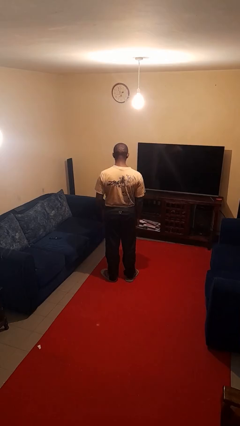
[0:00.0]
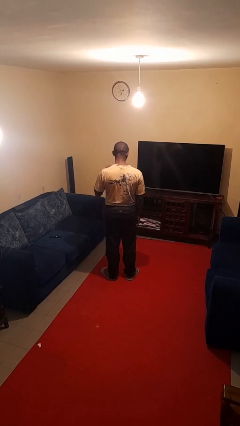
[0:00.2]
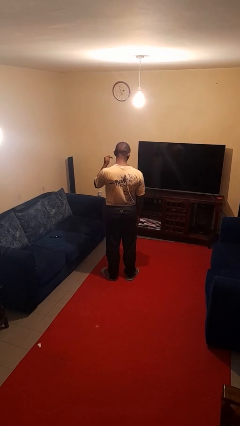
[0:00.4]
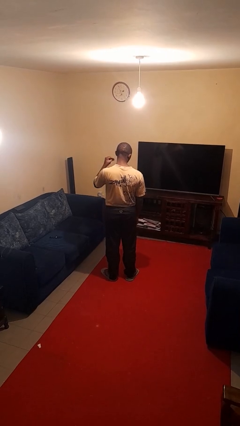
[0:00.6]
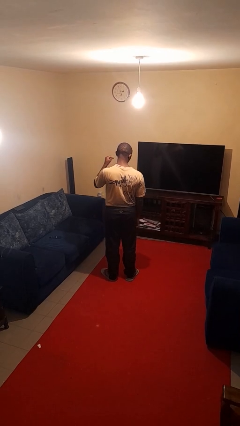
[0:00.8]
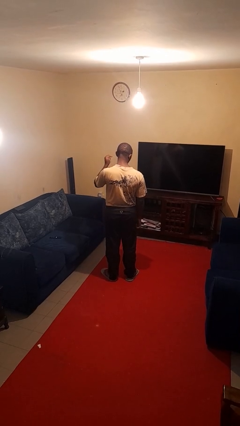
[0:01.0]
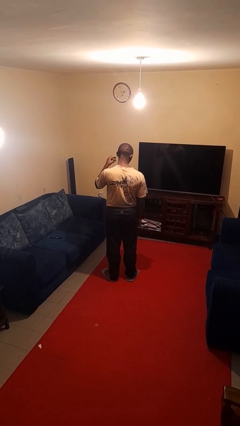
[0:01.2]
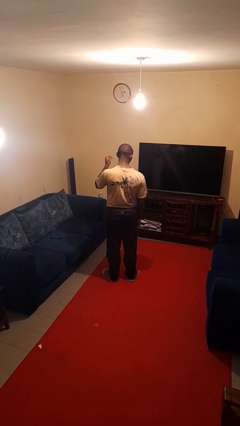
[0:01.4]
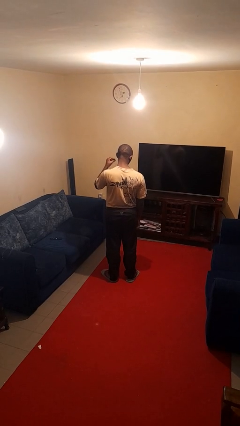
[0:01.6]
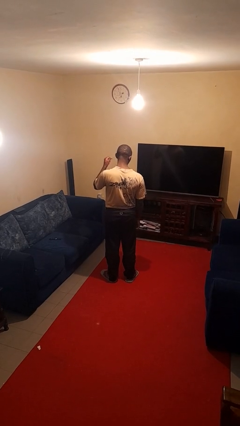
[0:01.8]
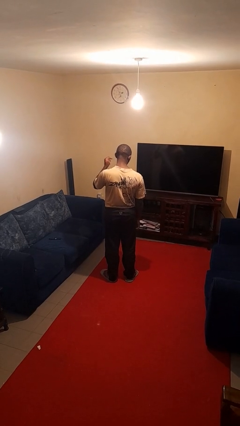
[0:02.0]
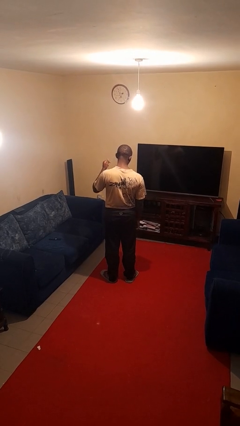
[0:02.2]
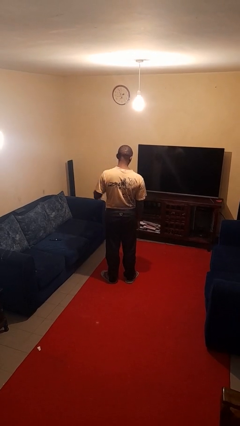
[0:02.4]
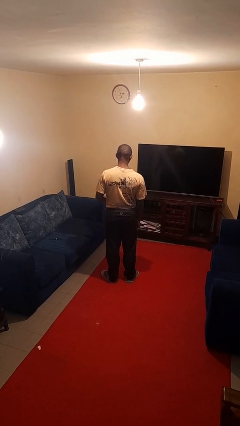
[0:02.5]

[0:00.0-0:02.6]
person snaps fingers

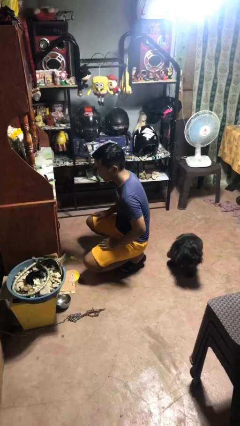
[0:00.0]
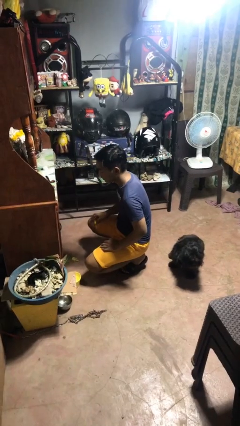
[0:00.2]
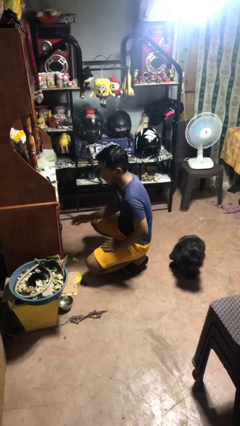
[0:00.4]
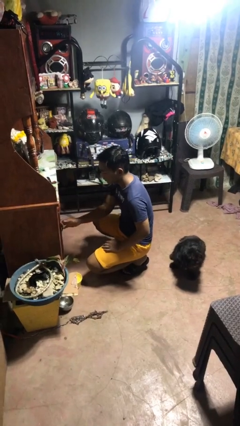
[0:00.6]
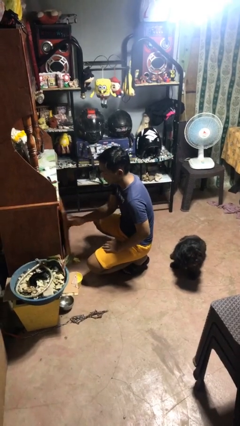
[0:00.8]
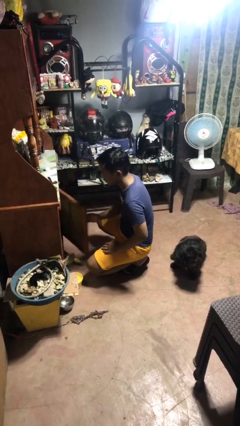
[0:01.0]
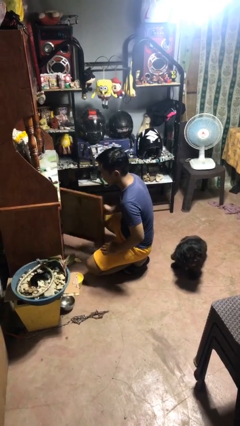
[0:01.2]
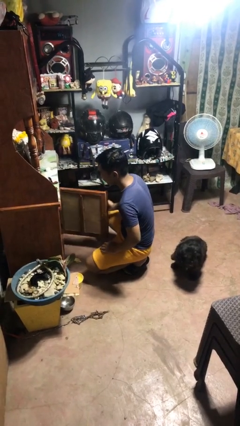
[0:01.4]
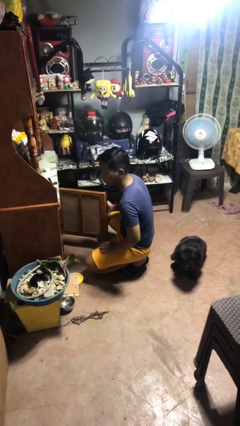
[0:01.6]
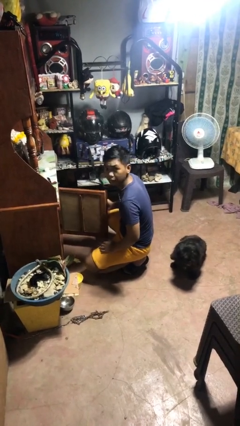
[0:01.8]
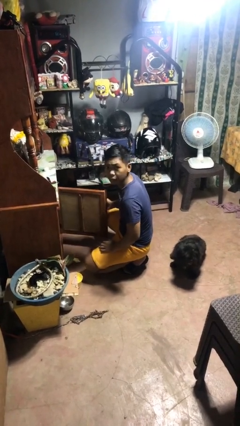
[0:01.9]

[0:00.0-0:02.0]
person opens cabinet

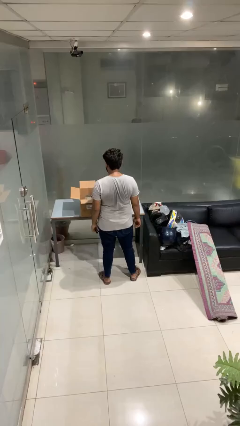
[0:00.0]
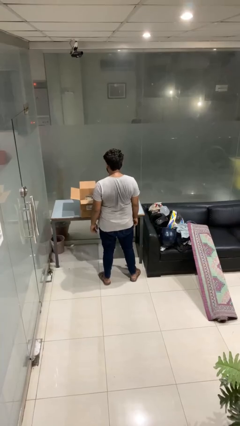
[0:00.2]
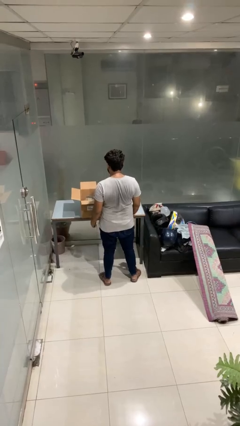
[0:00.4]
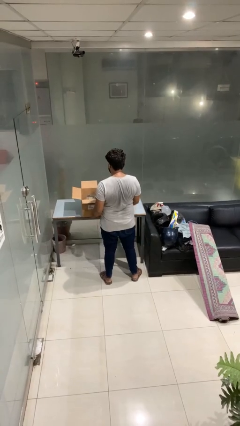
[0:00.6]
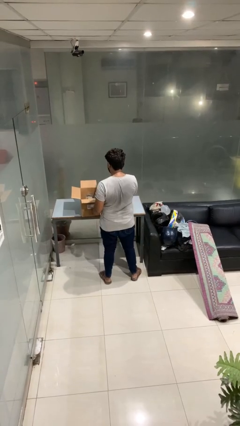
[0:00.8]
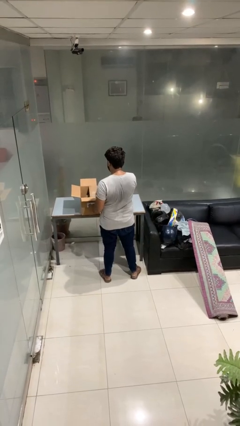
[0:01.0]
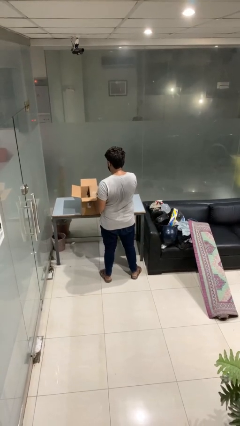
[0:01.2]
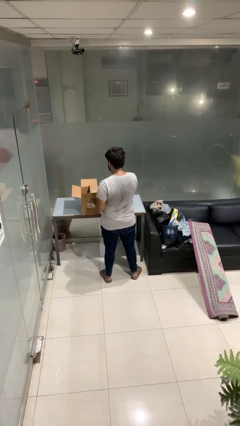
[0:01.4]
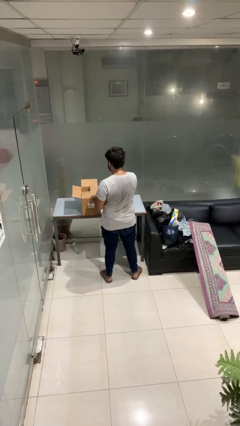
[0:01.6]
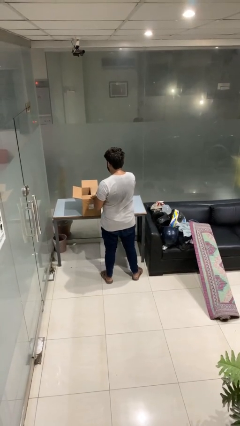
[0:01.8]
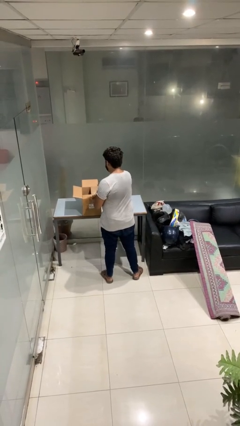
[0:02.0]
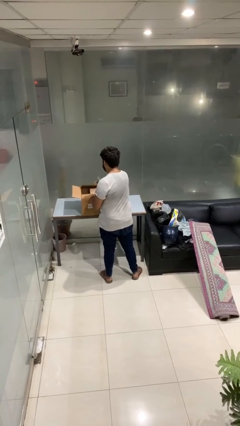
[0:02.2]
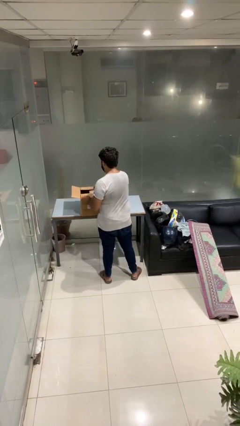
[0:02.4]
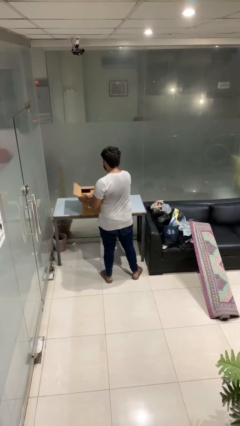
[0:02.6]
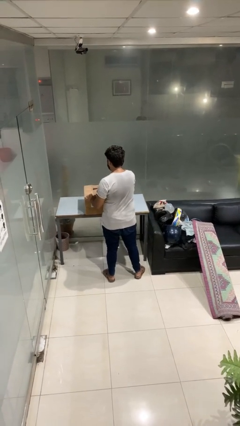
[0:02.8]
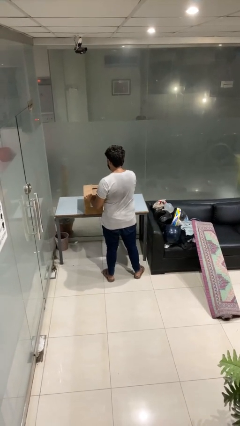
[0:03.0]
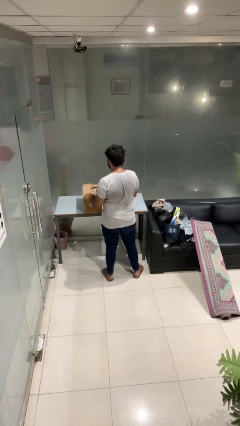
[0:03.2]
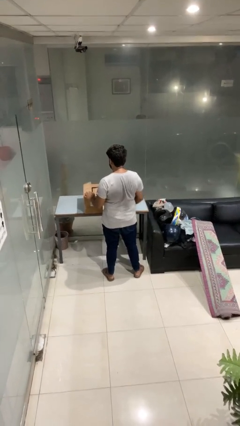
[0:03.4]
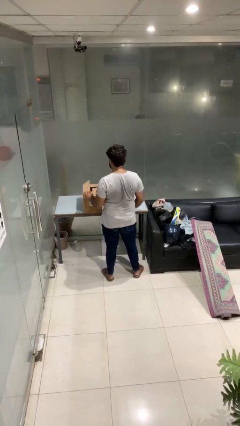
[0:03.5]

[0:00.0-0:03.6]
person closes box

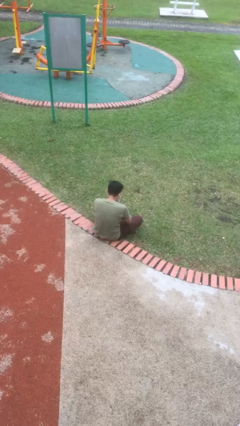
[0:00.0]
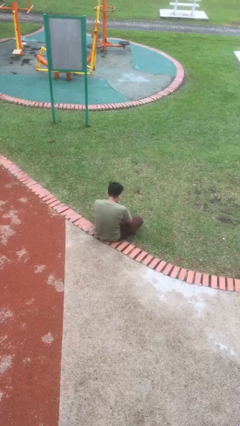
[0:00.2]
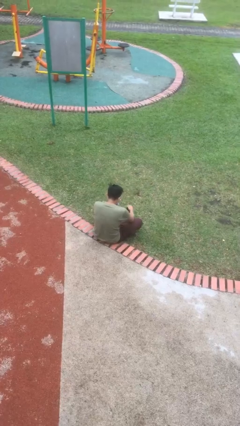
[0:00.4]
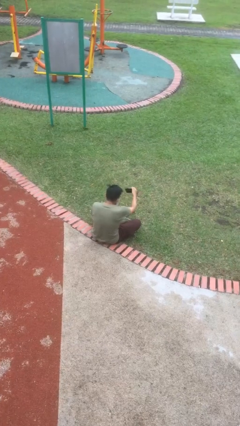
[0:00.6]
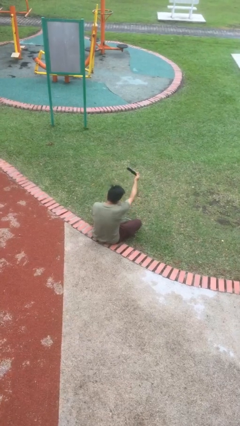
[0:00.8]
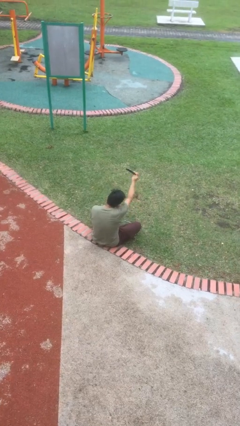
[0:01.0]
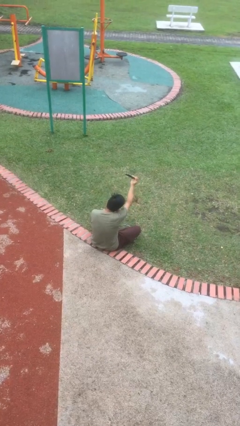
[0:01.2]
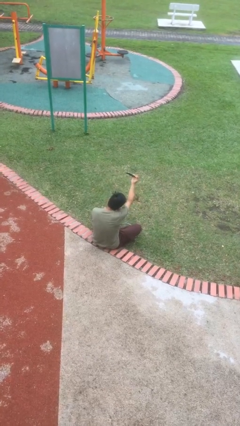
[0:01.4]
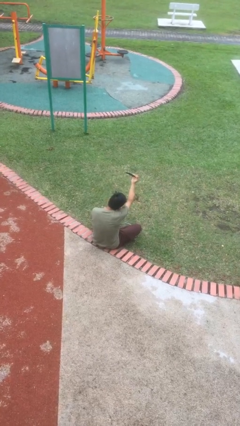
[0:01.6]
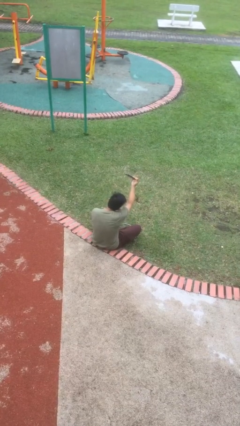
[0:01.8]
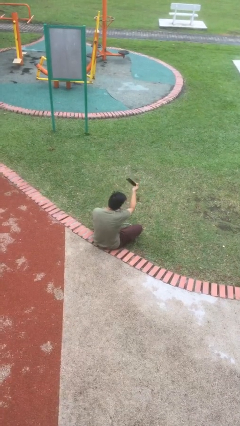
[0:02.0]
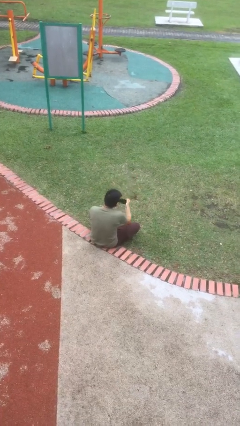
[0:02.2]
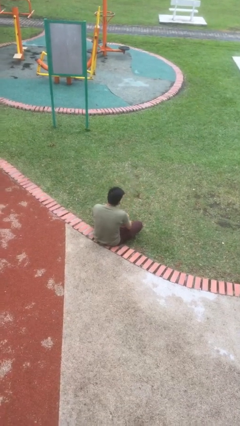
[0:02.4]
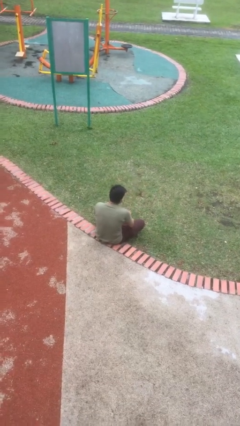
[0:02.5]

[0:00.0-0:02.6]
person takes selfie

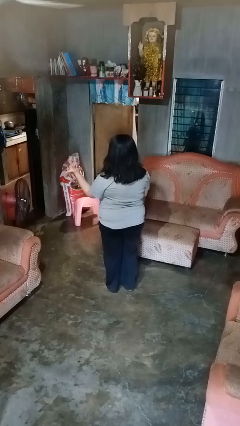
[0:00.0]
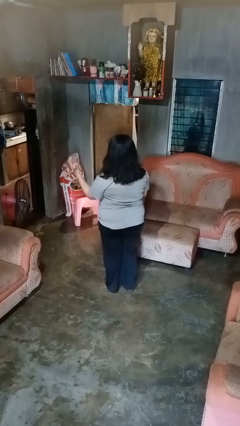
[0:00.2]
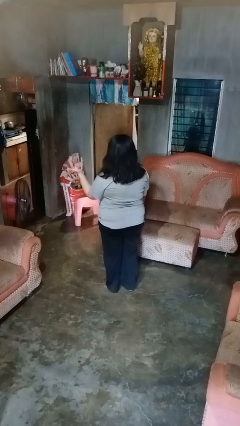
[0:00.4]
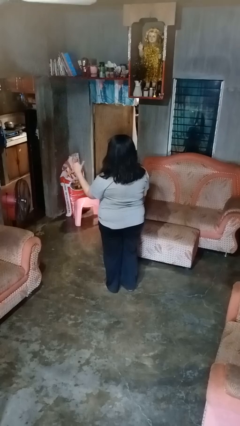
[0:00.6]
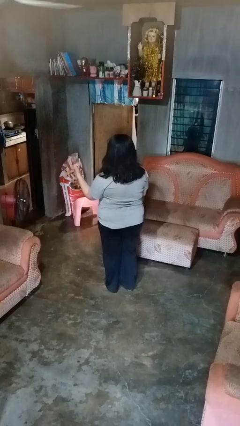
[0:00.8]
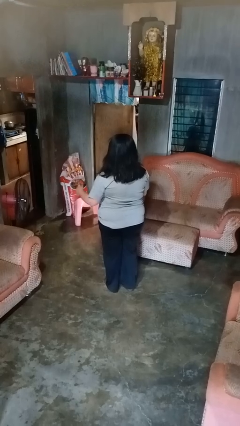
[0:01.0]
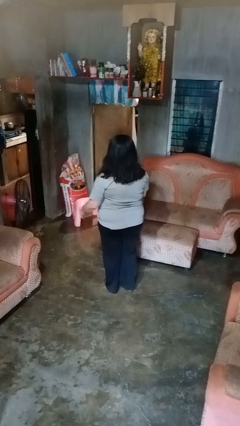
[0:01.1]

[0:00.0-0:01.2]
person gestures hang loose

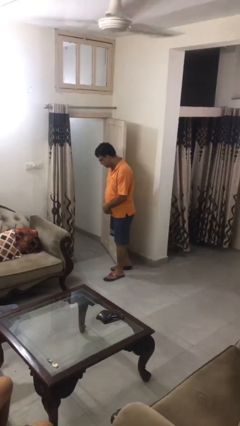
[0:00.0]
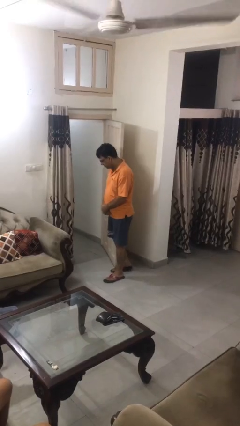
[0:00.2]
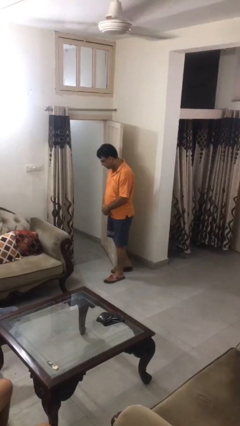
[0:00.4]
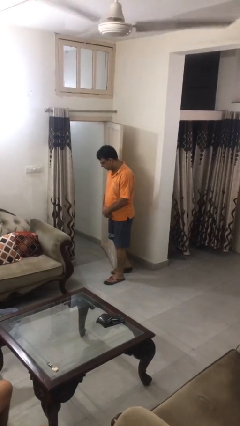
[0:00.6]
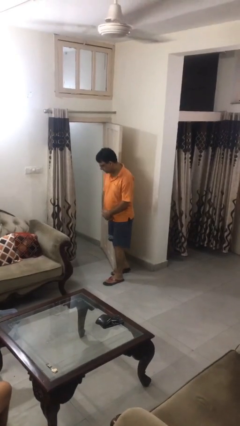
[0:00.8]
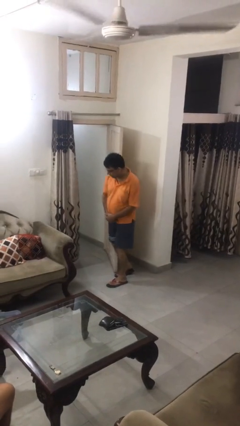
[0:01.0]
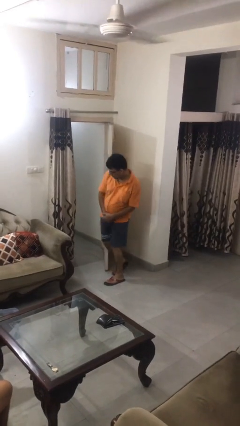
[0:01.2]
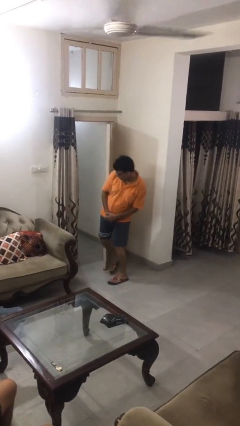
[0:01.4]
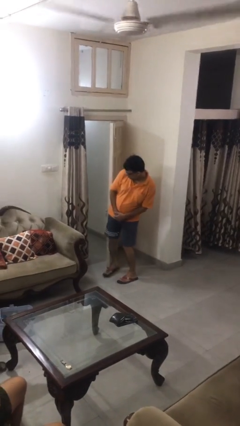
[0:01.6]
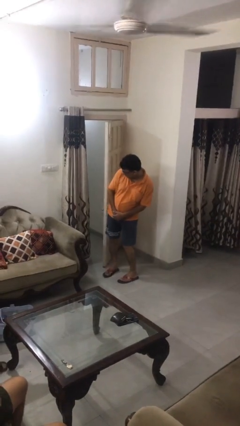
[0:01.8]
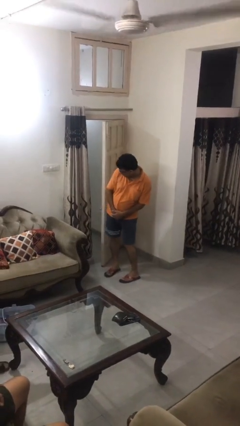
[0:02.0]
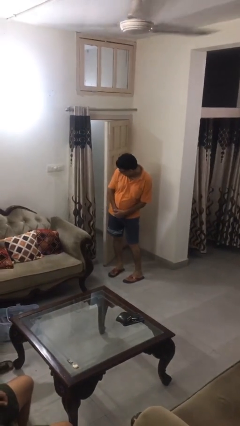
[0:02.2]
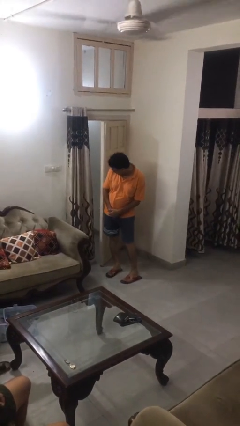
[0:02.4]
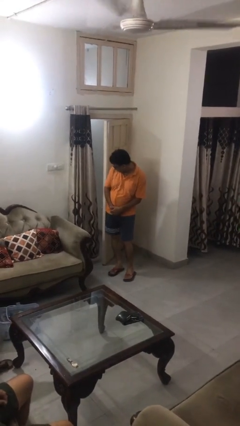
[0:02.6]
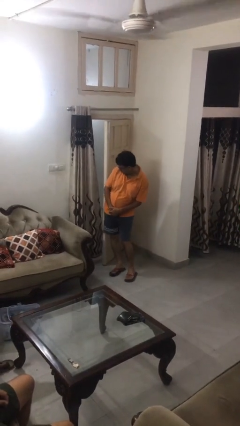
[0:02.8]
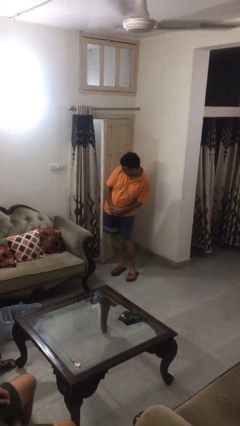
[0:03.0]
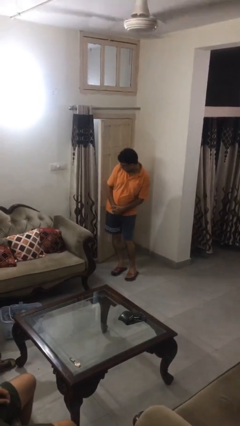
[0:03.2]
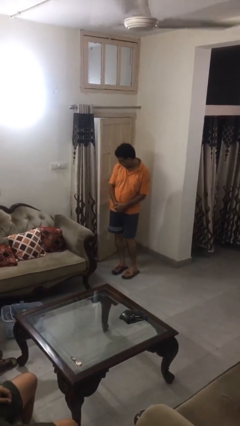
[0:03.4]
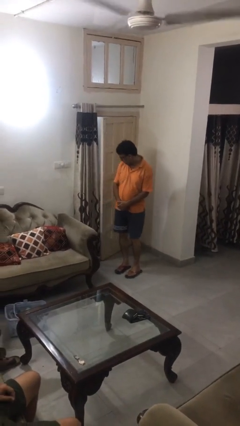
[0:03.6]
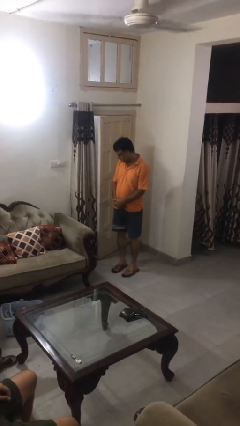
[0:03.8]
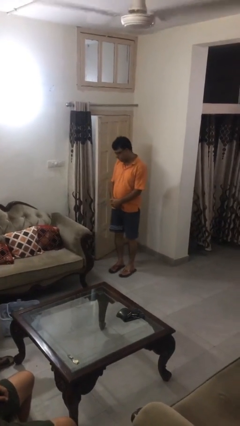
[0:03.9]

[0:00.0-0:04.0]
person closes door with hip

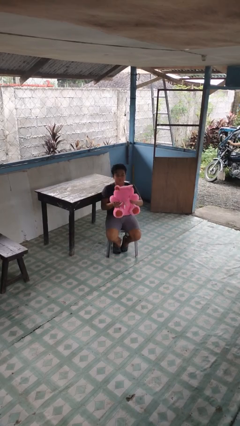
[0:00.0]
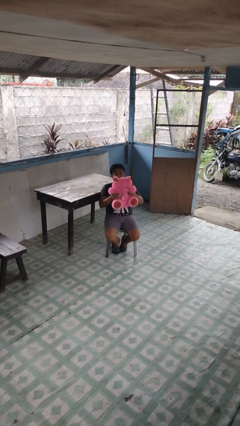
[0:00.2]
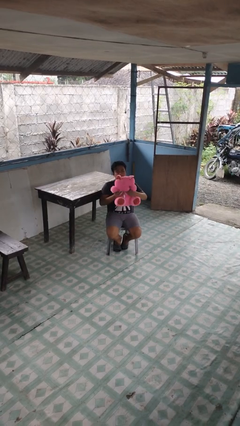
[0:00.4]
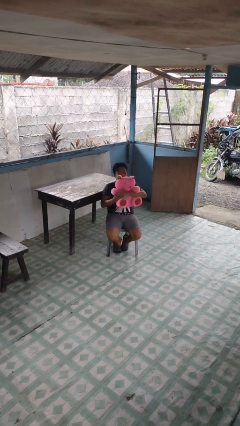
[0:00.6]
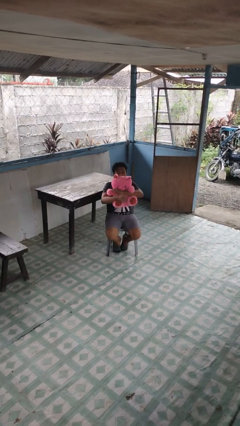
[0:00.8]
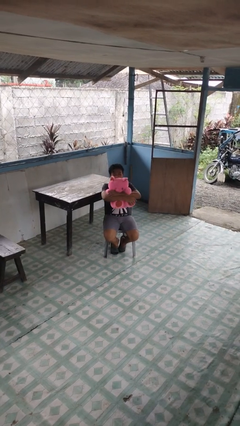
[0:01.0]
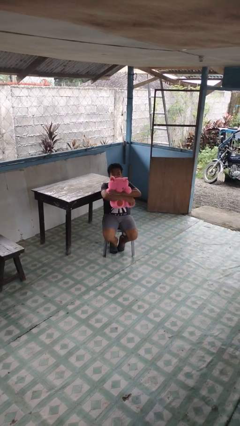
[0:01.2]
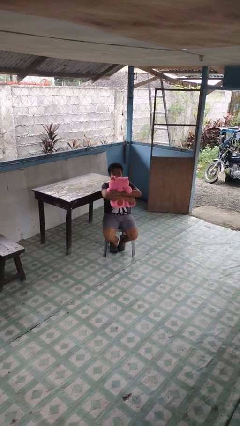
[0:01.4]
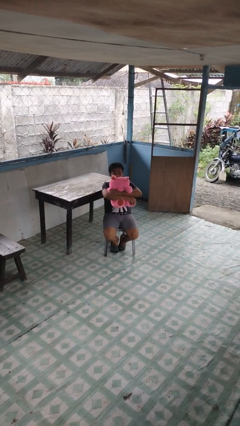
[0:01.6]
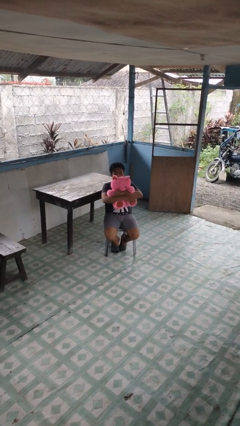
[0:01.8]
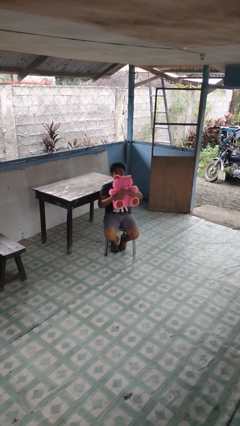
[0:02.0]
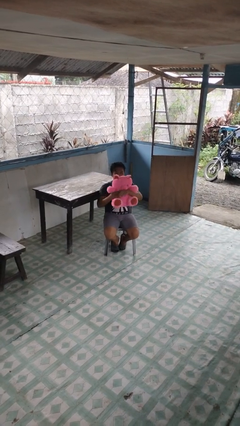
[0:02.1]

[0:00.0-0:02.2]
person hugs stuffed animal
